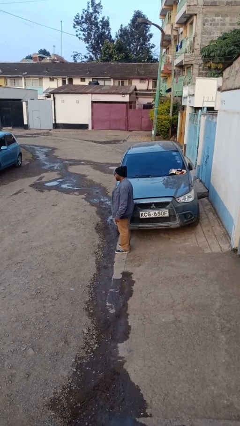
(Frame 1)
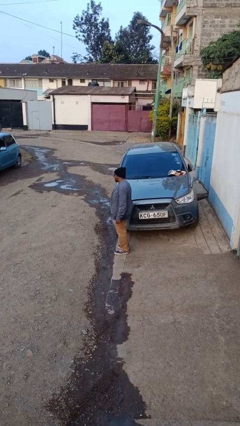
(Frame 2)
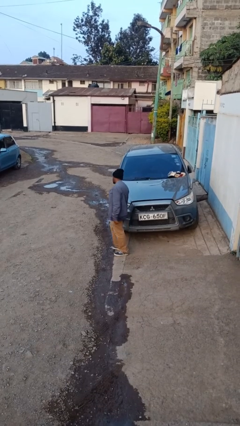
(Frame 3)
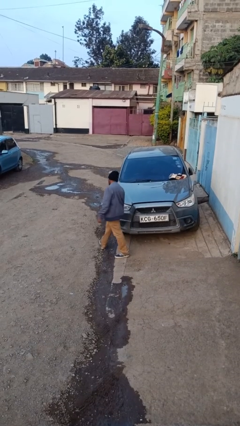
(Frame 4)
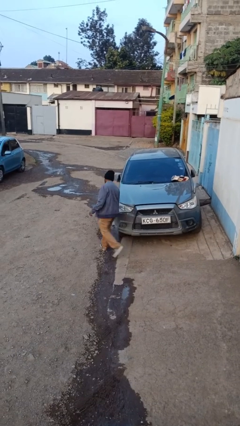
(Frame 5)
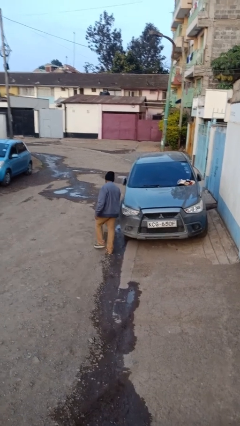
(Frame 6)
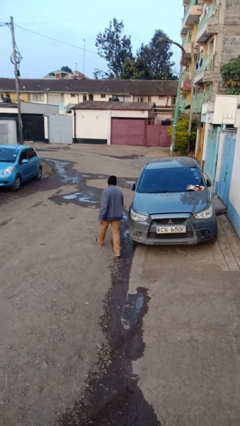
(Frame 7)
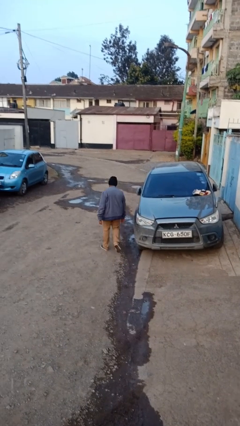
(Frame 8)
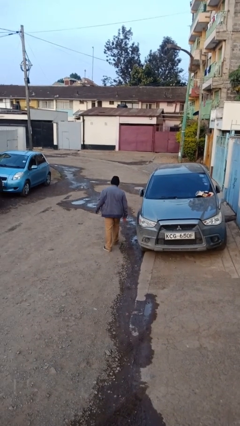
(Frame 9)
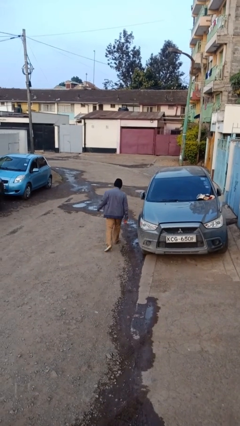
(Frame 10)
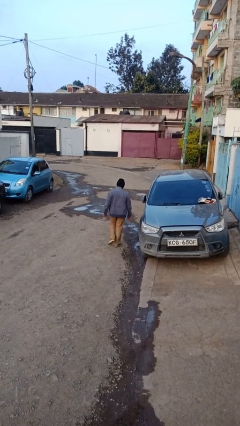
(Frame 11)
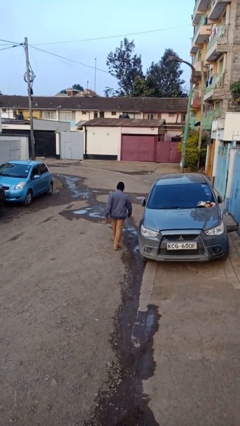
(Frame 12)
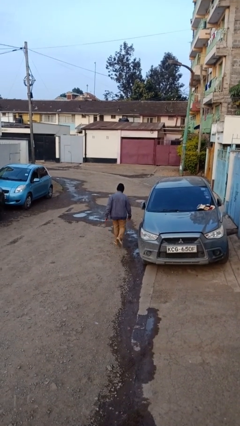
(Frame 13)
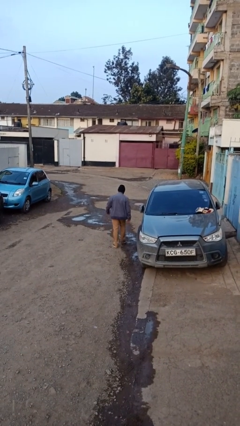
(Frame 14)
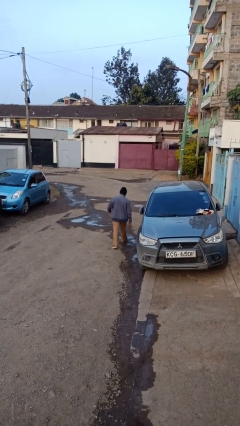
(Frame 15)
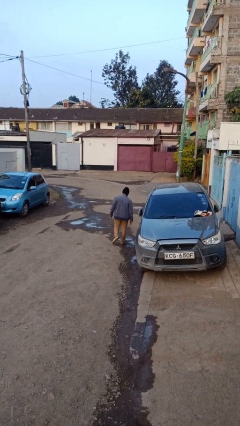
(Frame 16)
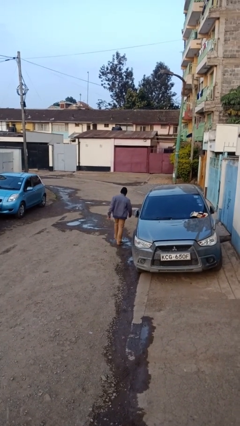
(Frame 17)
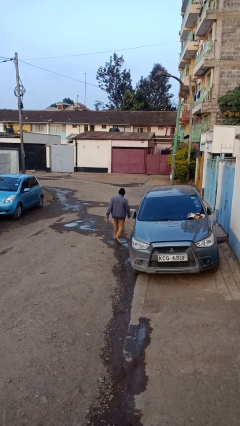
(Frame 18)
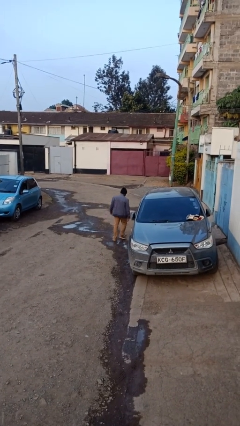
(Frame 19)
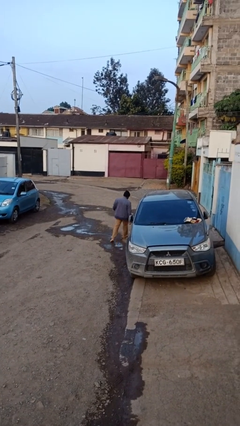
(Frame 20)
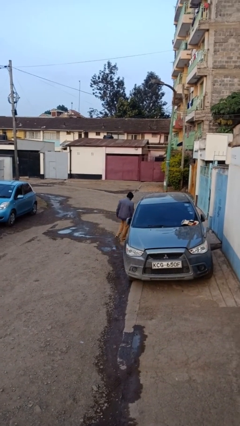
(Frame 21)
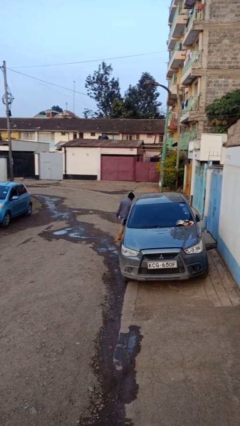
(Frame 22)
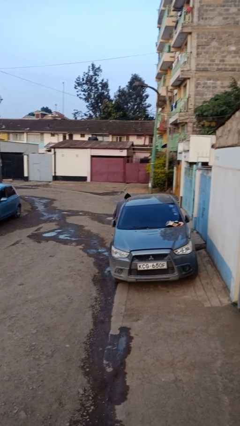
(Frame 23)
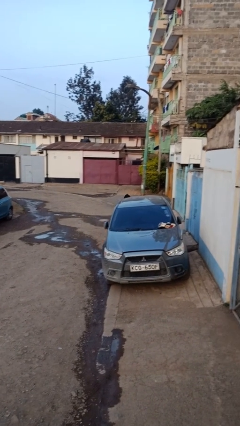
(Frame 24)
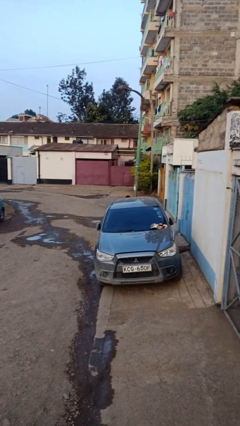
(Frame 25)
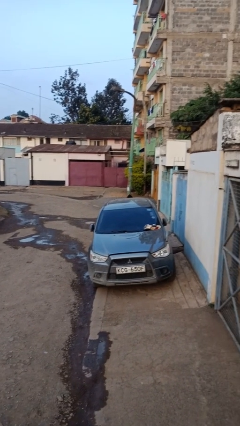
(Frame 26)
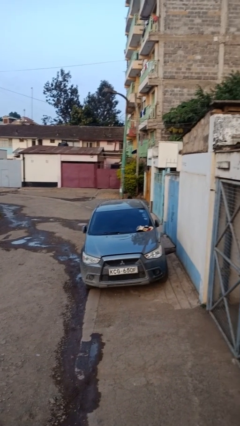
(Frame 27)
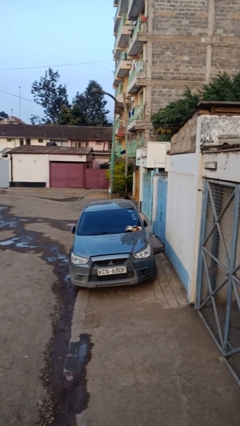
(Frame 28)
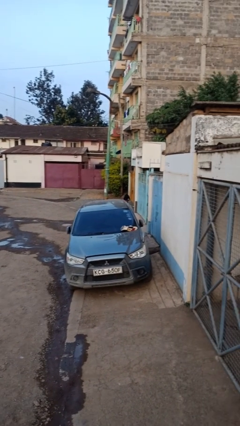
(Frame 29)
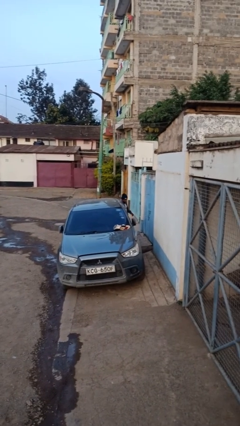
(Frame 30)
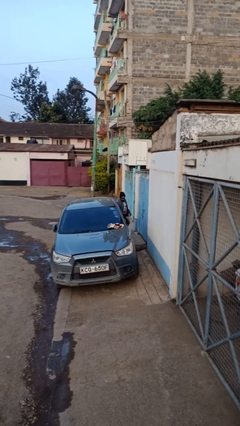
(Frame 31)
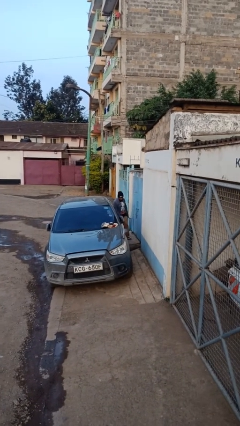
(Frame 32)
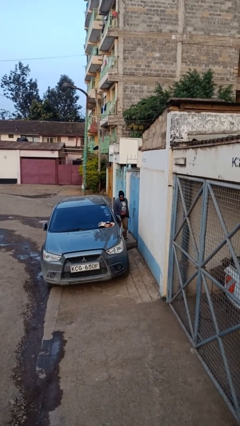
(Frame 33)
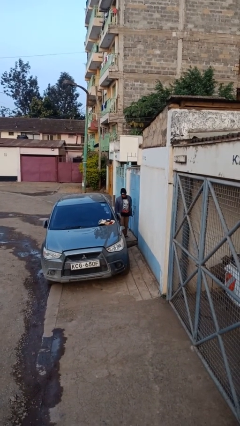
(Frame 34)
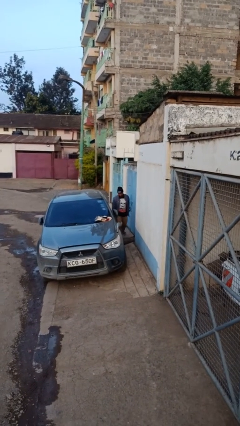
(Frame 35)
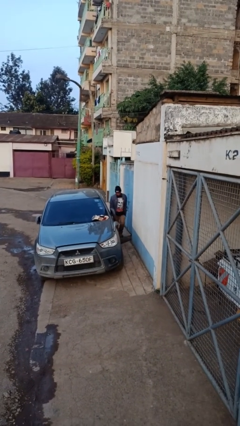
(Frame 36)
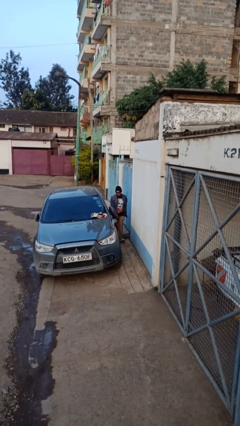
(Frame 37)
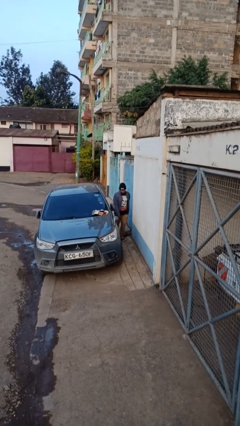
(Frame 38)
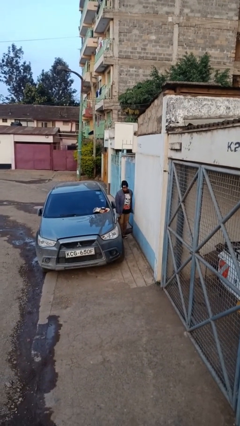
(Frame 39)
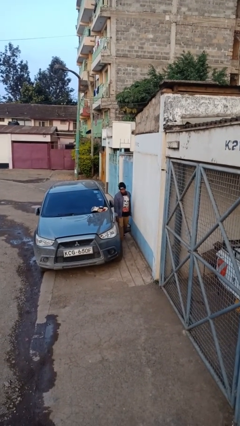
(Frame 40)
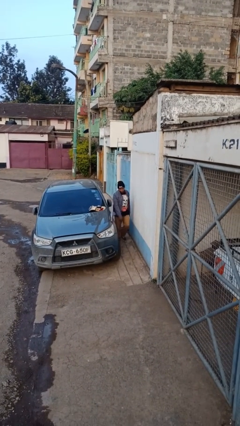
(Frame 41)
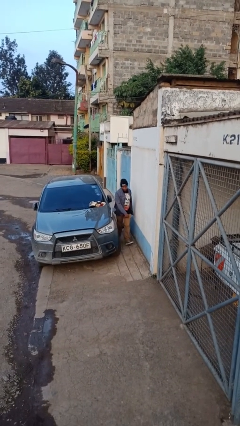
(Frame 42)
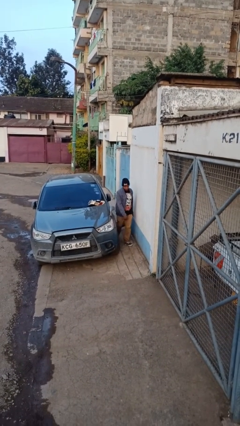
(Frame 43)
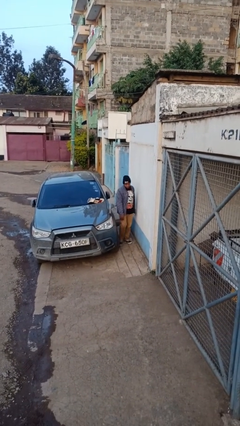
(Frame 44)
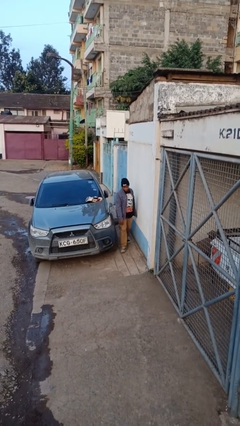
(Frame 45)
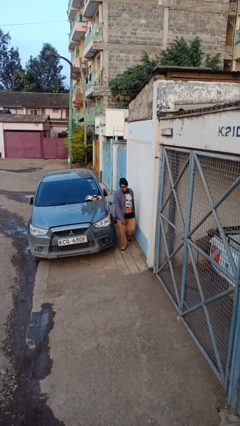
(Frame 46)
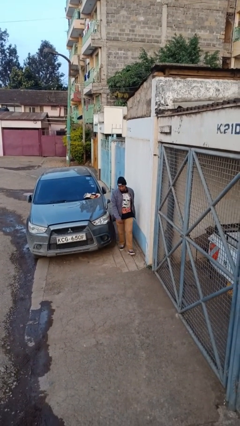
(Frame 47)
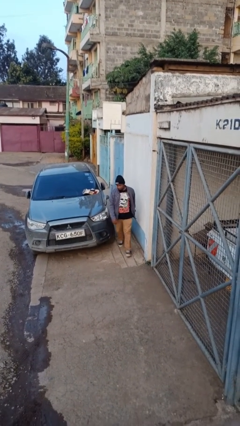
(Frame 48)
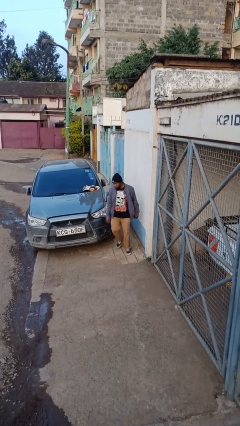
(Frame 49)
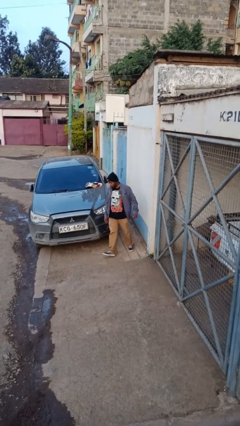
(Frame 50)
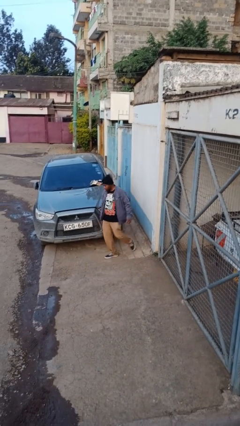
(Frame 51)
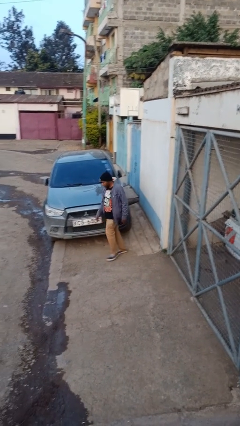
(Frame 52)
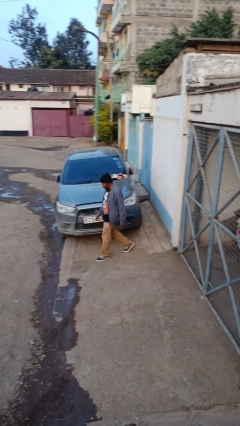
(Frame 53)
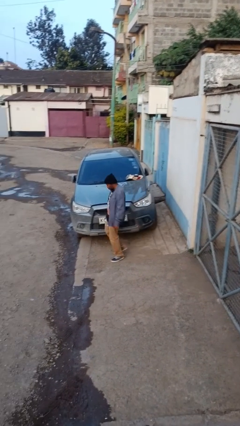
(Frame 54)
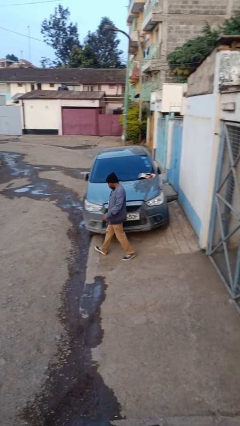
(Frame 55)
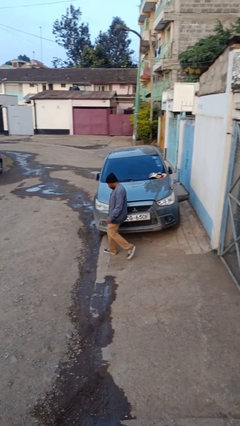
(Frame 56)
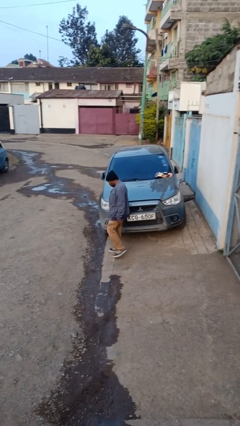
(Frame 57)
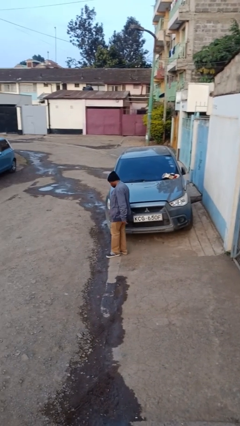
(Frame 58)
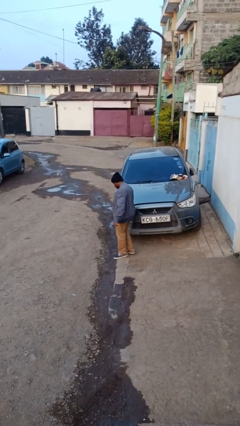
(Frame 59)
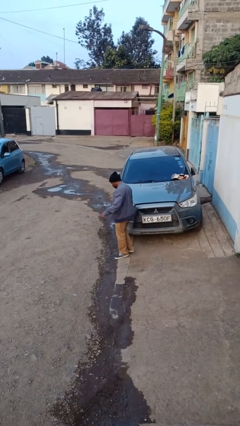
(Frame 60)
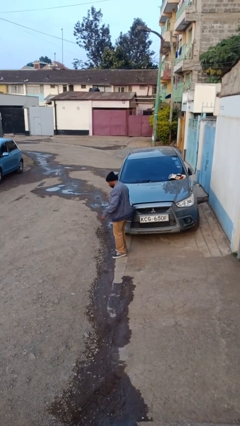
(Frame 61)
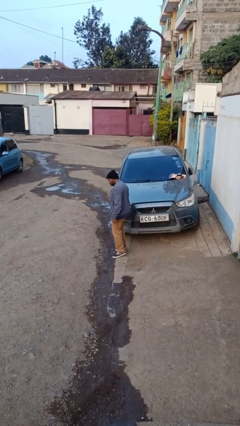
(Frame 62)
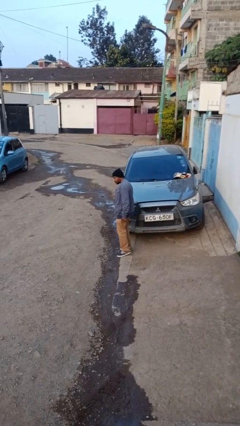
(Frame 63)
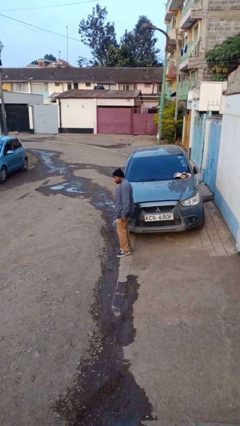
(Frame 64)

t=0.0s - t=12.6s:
person walks around car

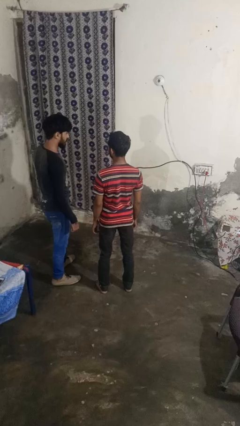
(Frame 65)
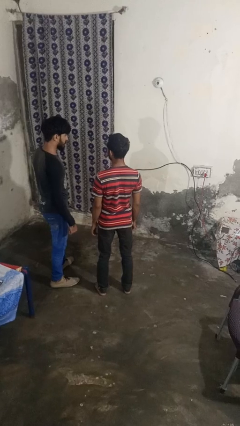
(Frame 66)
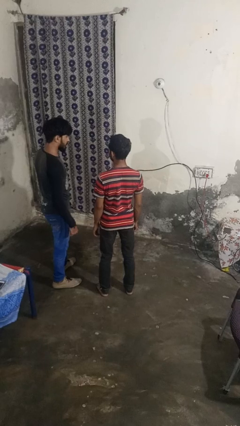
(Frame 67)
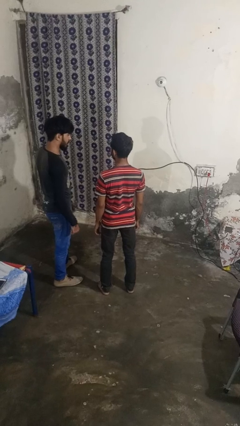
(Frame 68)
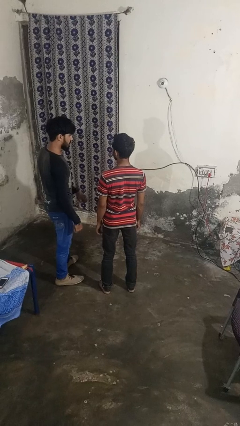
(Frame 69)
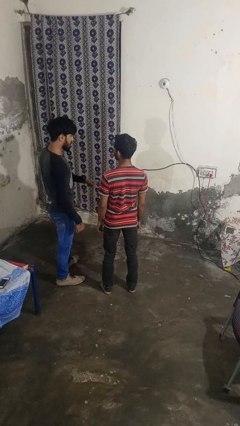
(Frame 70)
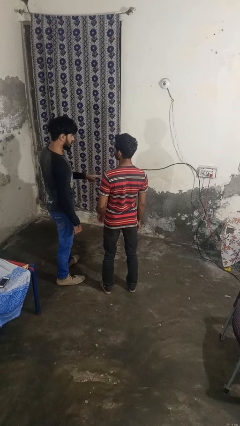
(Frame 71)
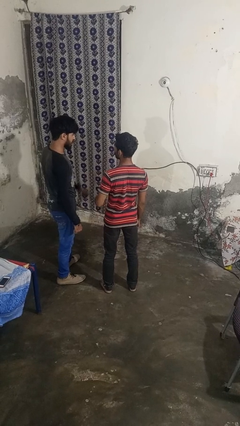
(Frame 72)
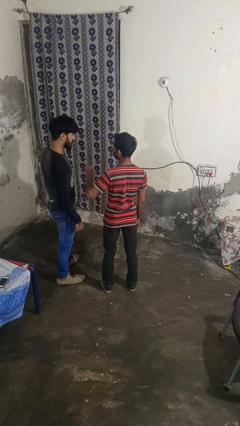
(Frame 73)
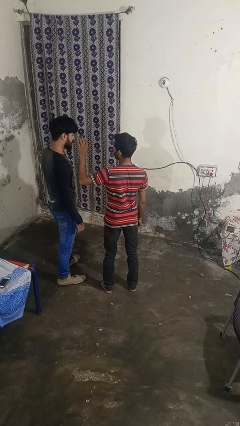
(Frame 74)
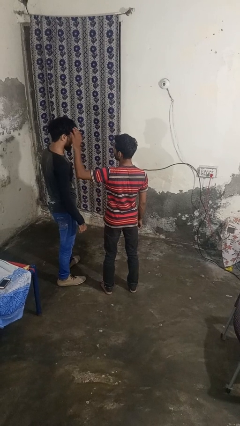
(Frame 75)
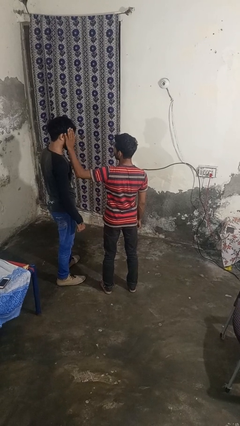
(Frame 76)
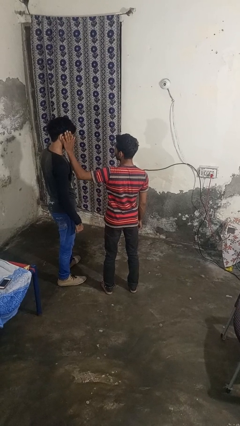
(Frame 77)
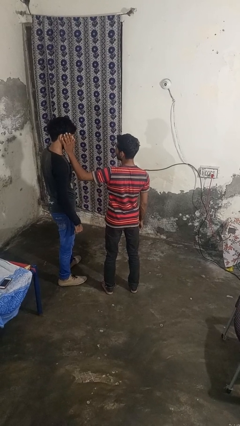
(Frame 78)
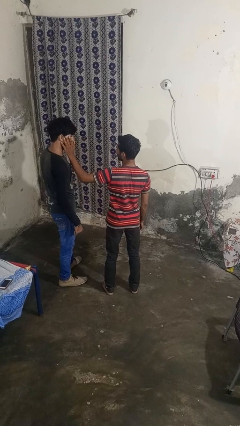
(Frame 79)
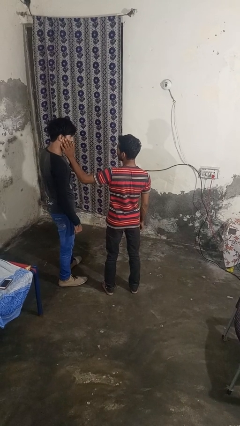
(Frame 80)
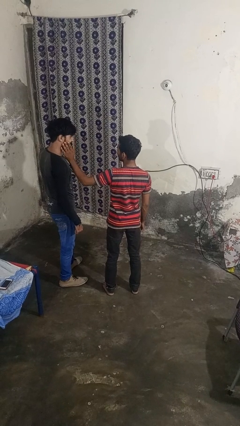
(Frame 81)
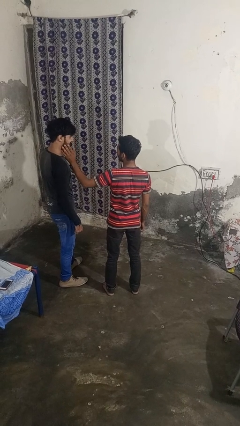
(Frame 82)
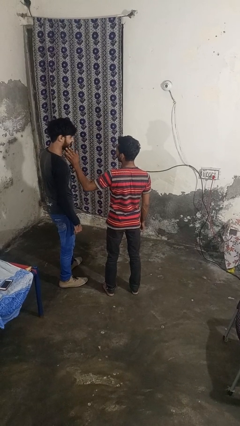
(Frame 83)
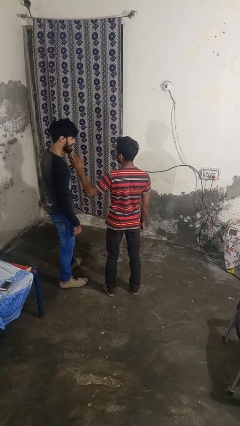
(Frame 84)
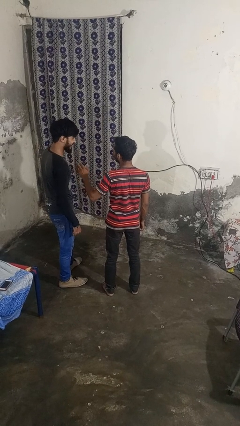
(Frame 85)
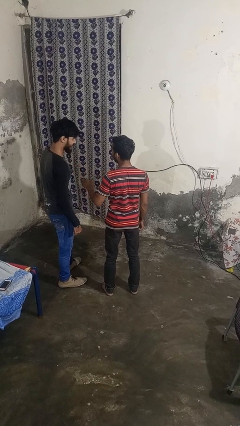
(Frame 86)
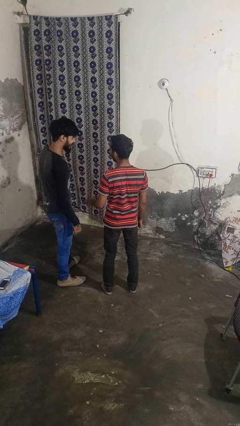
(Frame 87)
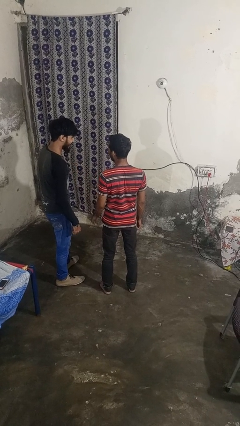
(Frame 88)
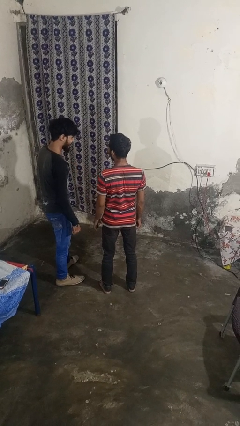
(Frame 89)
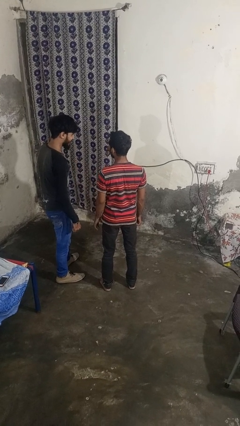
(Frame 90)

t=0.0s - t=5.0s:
person touches face of person

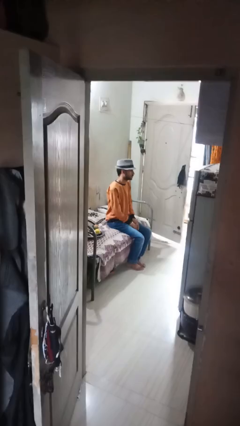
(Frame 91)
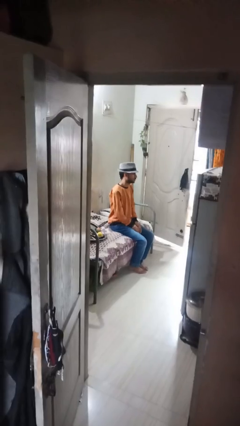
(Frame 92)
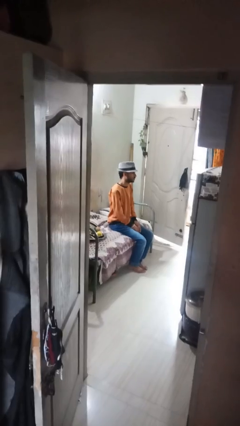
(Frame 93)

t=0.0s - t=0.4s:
person strokes chin
